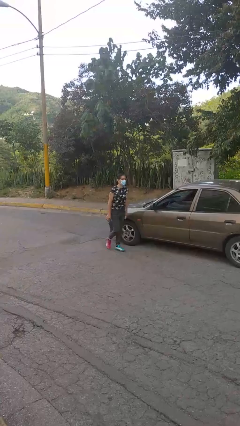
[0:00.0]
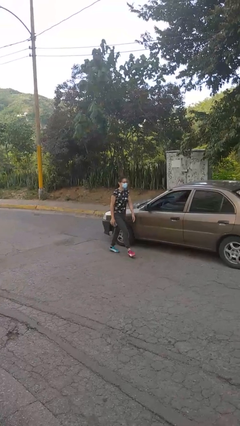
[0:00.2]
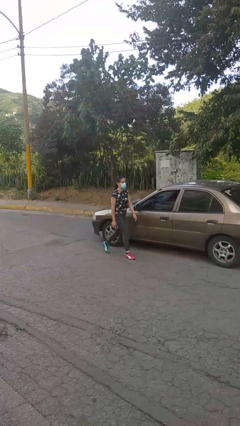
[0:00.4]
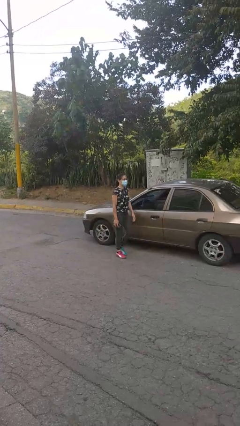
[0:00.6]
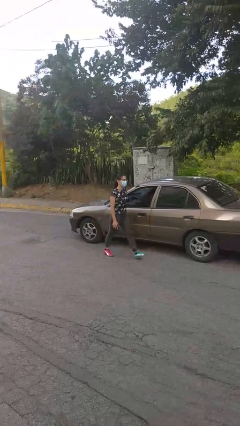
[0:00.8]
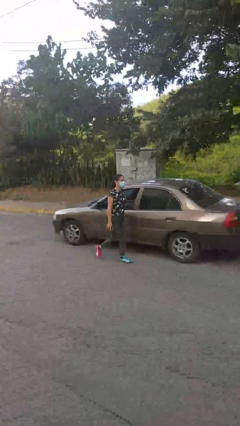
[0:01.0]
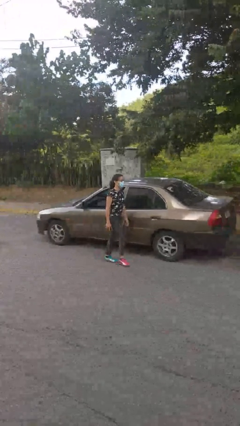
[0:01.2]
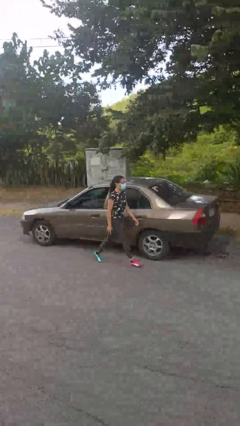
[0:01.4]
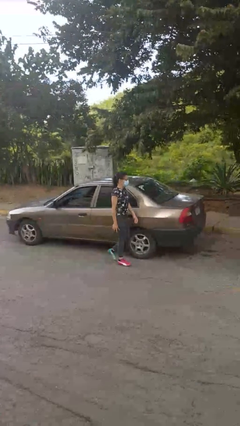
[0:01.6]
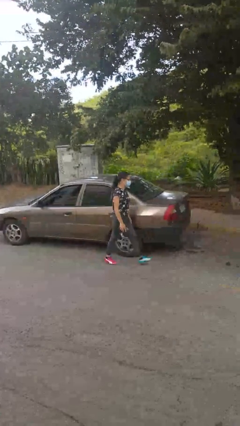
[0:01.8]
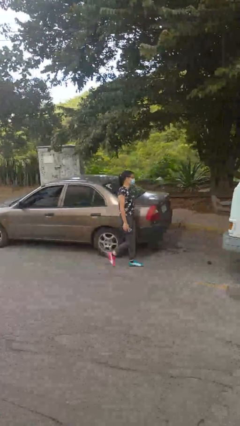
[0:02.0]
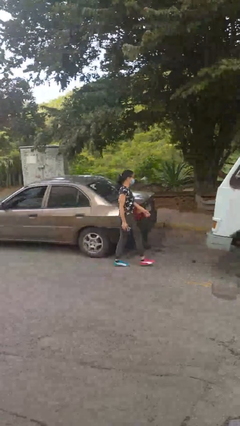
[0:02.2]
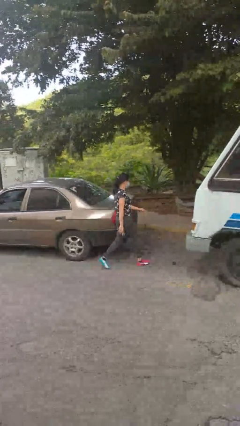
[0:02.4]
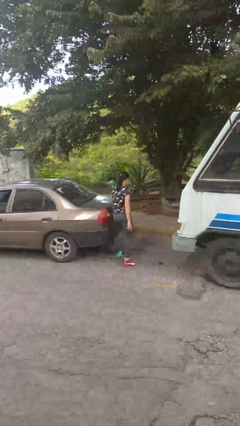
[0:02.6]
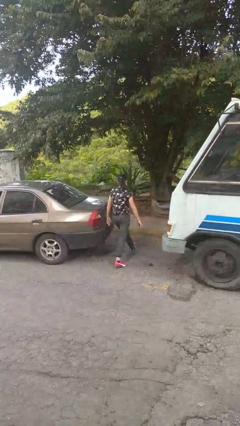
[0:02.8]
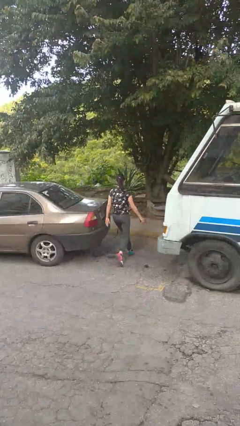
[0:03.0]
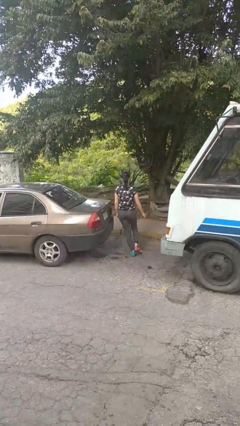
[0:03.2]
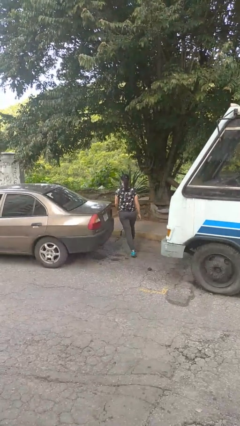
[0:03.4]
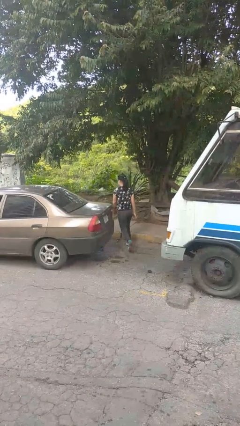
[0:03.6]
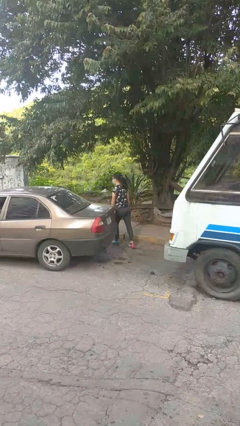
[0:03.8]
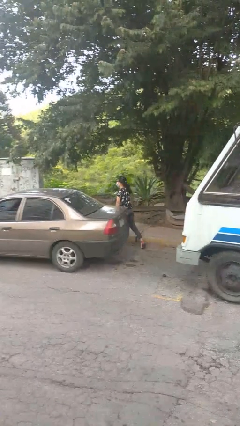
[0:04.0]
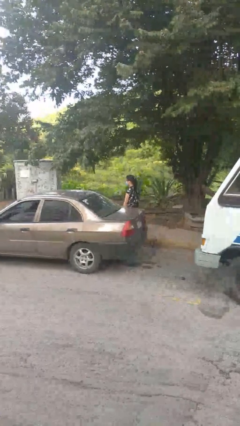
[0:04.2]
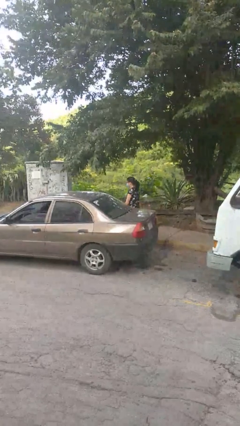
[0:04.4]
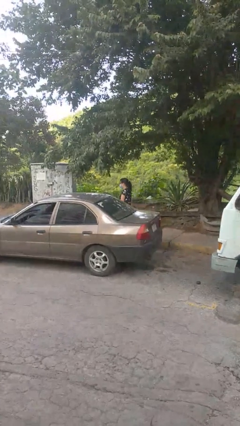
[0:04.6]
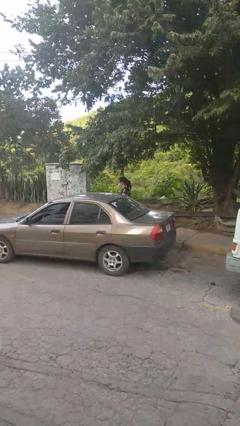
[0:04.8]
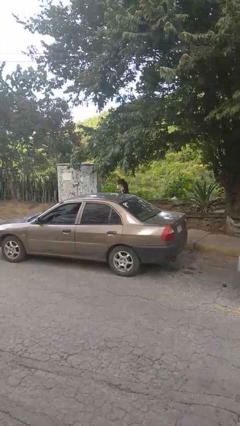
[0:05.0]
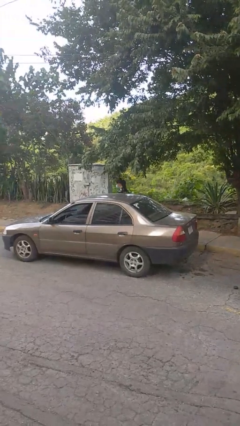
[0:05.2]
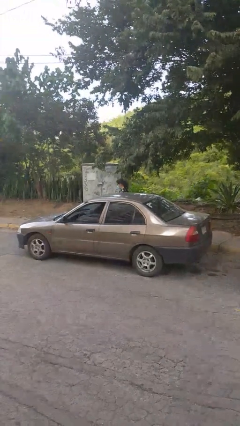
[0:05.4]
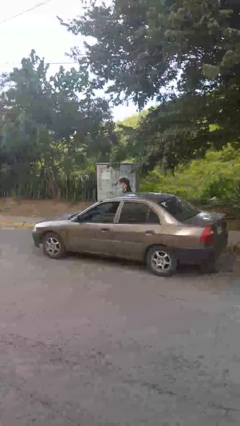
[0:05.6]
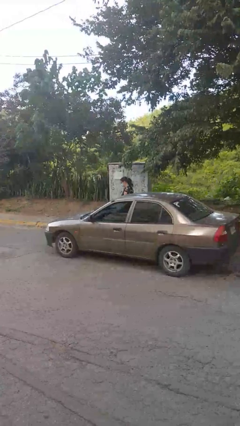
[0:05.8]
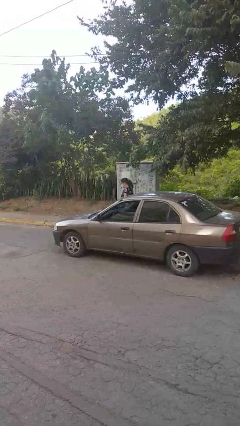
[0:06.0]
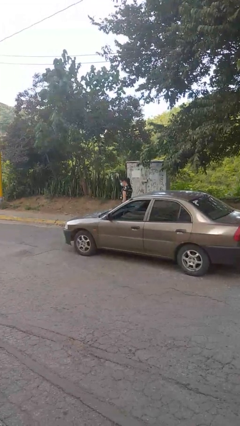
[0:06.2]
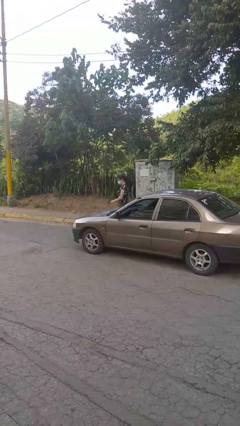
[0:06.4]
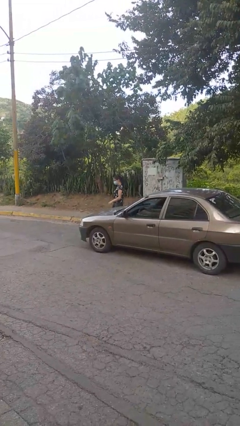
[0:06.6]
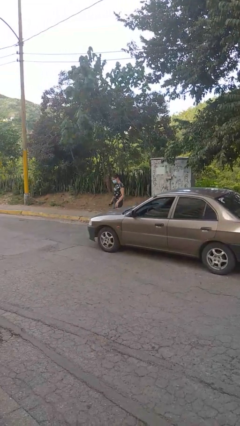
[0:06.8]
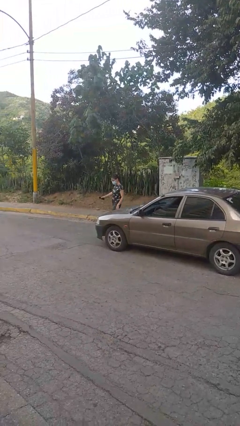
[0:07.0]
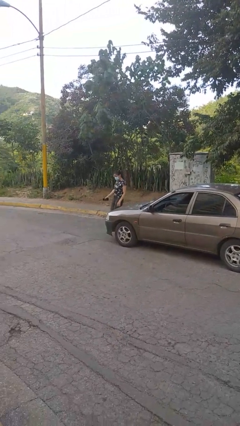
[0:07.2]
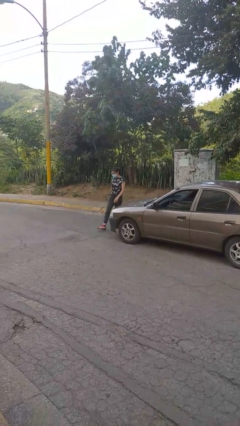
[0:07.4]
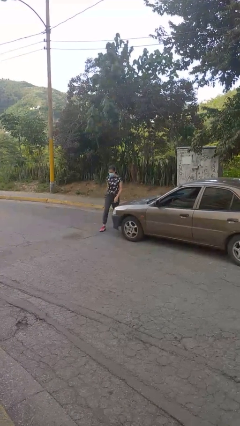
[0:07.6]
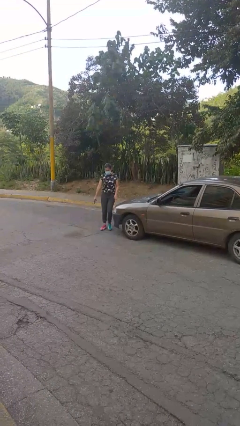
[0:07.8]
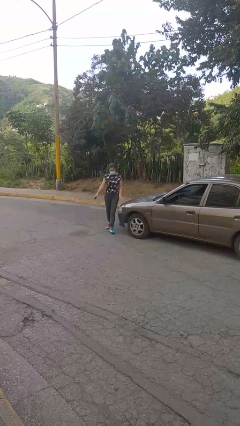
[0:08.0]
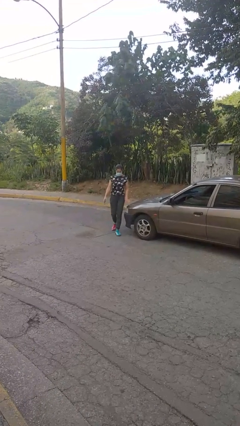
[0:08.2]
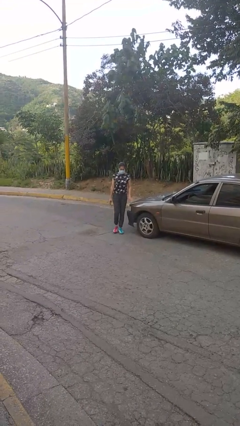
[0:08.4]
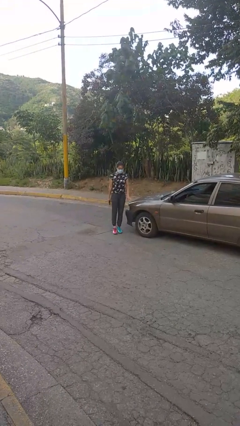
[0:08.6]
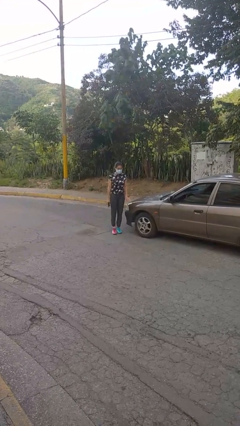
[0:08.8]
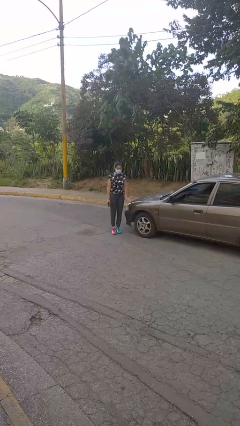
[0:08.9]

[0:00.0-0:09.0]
person walks around car

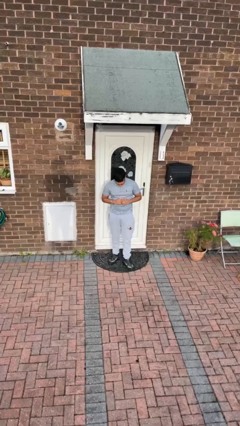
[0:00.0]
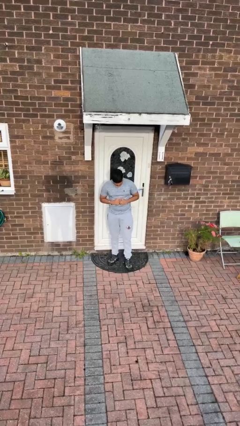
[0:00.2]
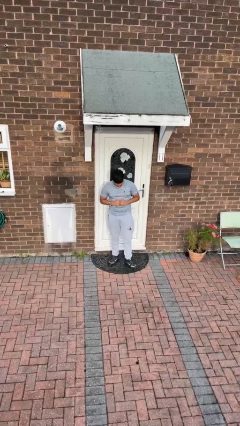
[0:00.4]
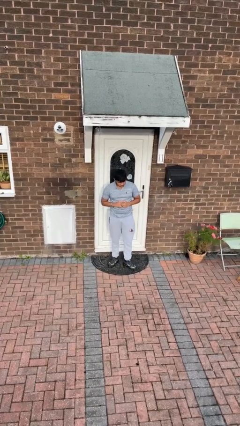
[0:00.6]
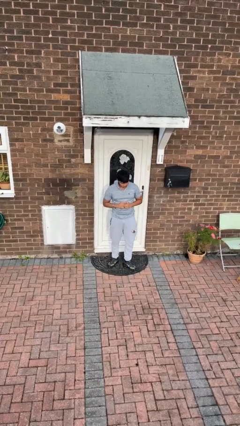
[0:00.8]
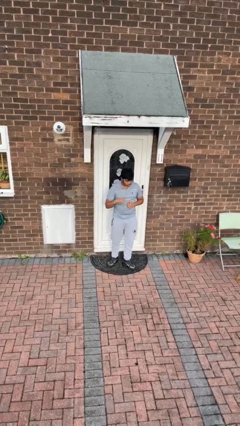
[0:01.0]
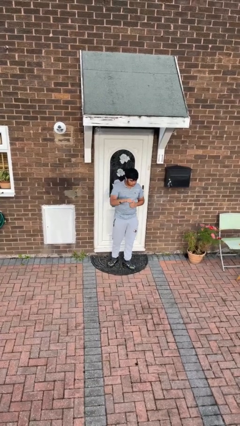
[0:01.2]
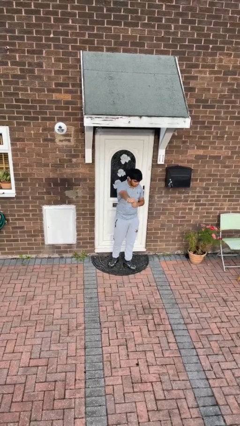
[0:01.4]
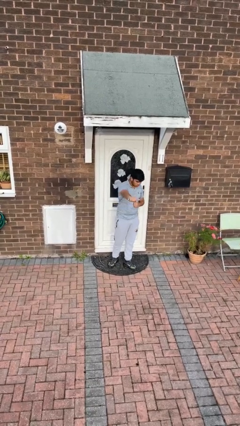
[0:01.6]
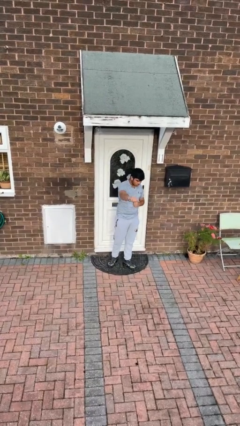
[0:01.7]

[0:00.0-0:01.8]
person punches

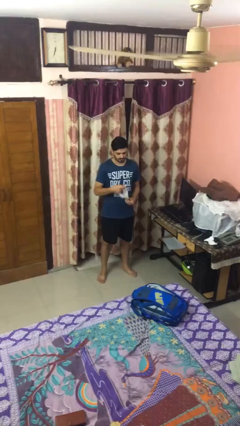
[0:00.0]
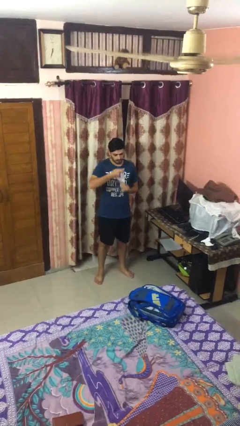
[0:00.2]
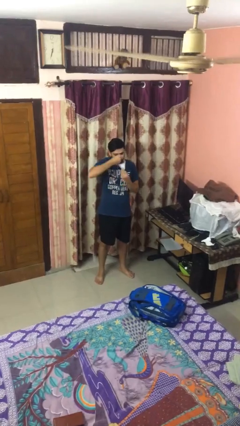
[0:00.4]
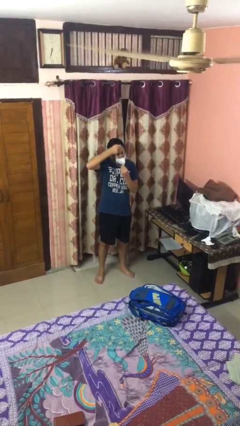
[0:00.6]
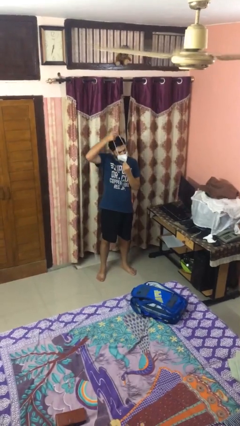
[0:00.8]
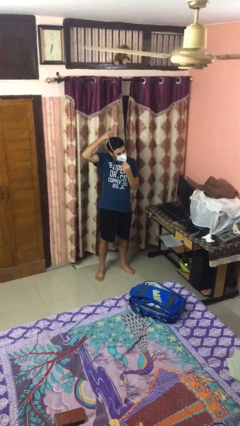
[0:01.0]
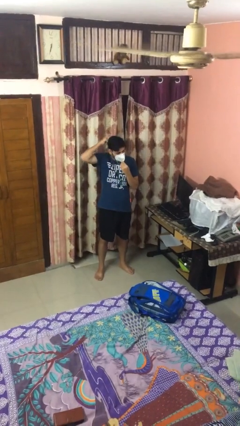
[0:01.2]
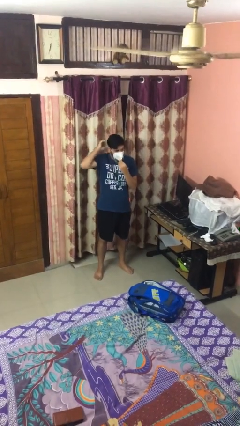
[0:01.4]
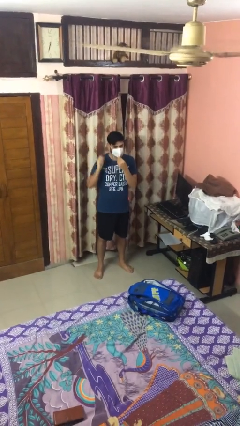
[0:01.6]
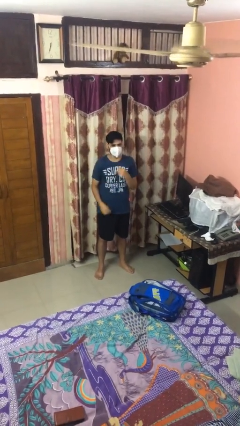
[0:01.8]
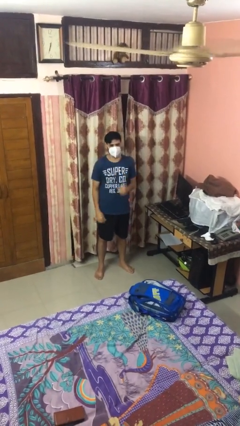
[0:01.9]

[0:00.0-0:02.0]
person puts on facemask

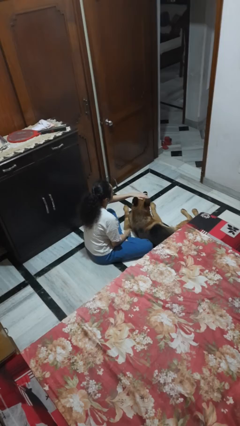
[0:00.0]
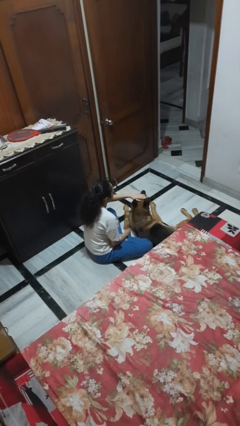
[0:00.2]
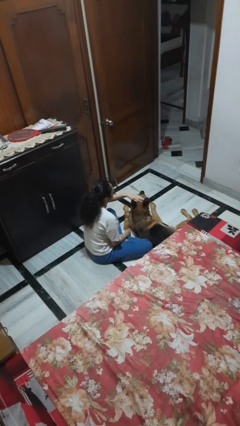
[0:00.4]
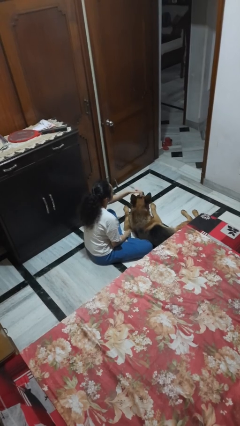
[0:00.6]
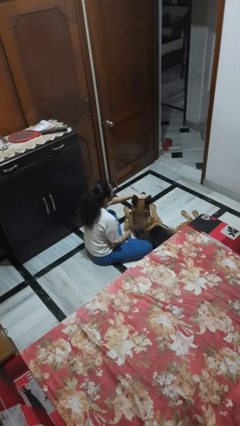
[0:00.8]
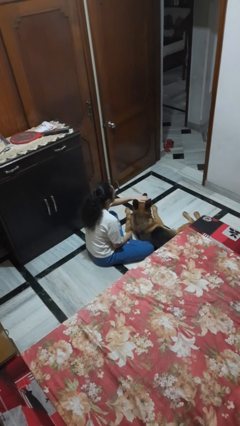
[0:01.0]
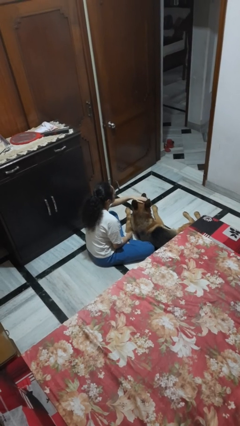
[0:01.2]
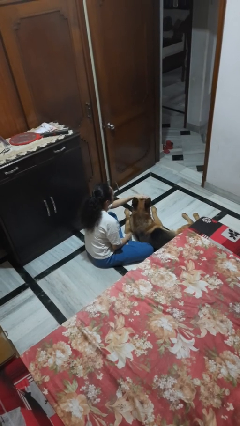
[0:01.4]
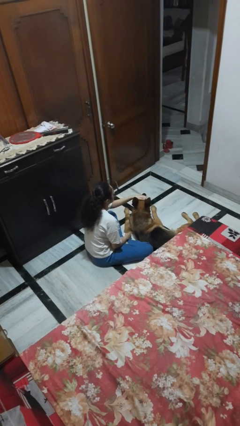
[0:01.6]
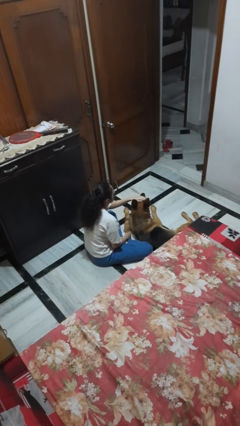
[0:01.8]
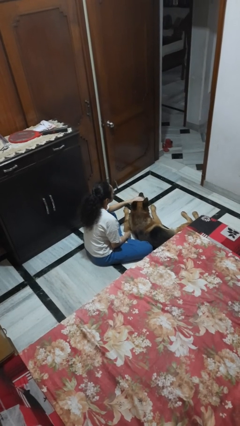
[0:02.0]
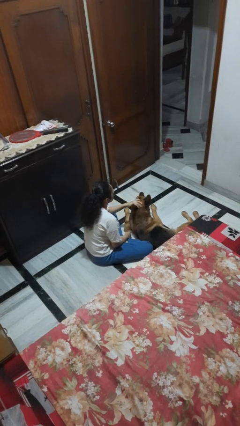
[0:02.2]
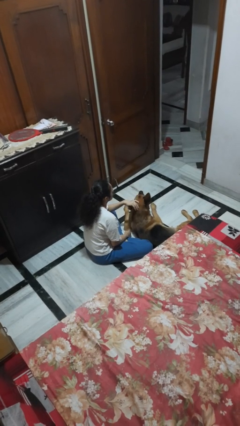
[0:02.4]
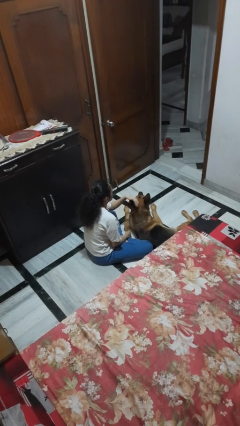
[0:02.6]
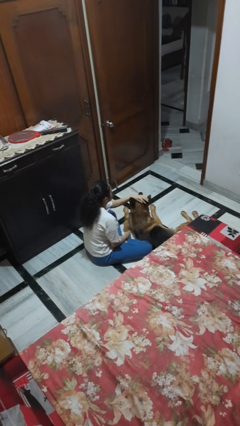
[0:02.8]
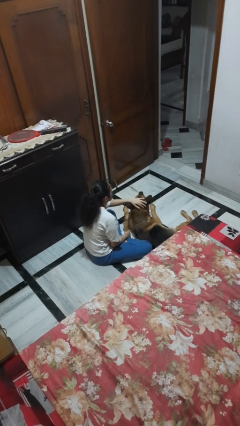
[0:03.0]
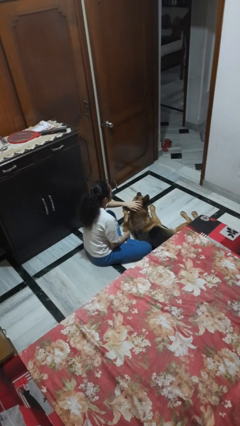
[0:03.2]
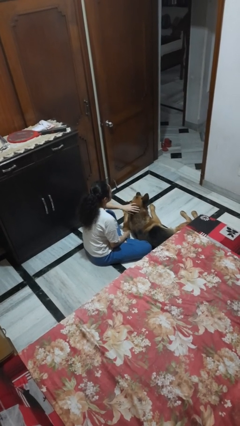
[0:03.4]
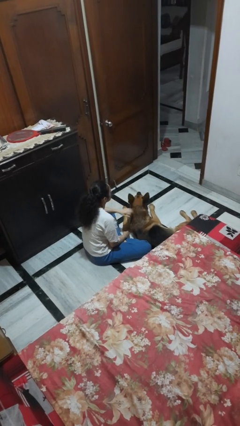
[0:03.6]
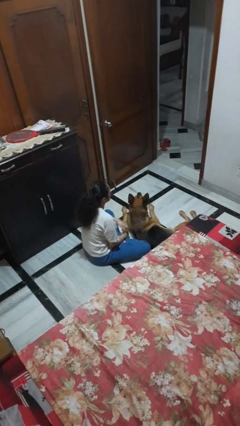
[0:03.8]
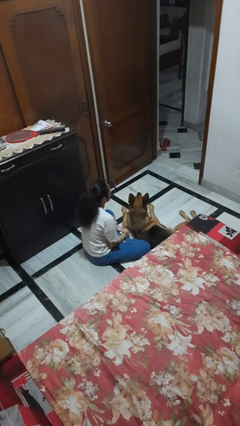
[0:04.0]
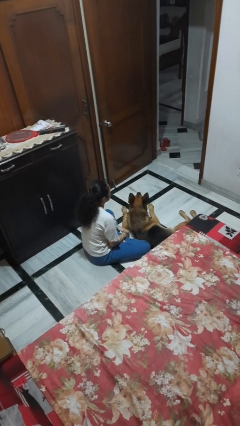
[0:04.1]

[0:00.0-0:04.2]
person pets dog

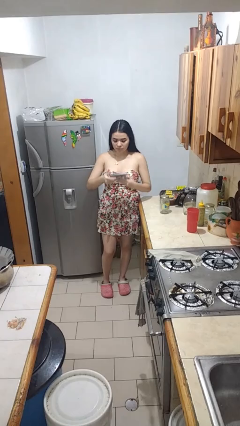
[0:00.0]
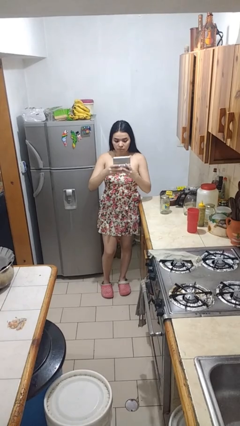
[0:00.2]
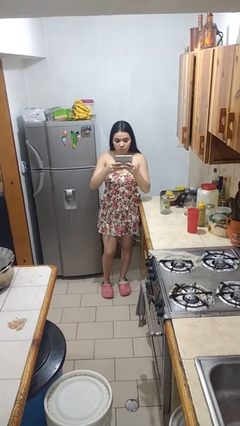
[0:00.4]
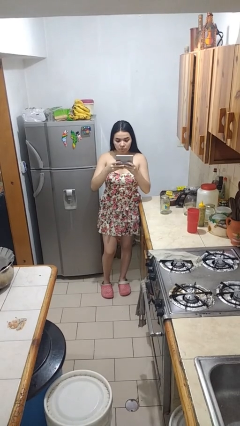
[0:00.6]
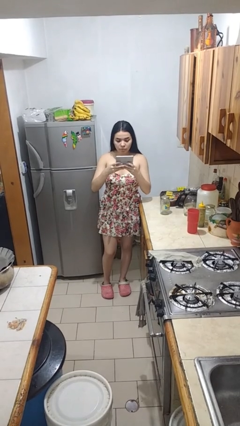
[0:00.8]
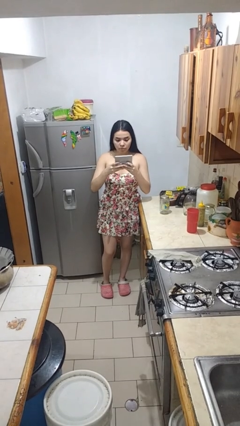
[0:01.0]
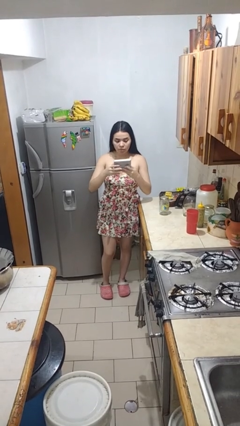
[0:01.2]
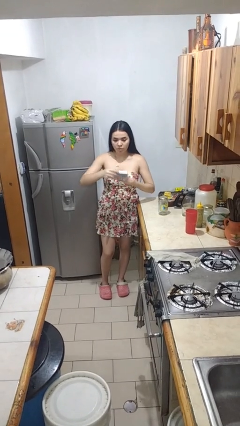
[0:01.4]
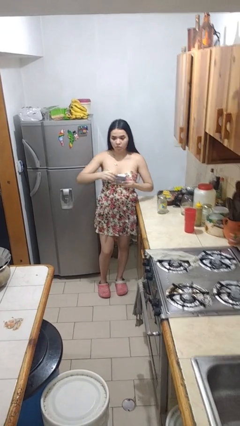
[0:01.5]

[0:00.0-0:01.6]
person interacts with handheld game
